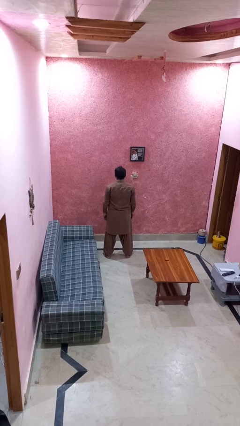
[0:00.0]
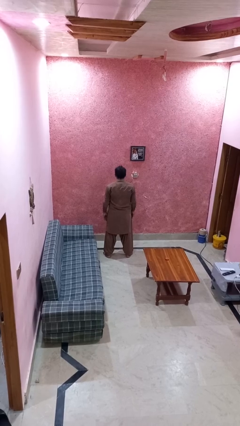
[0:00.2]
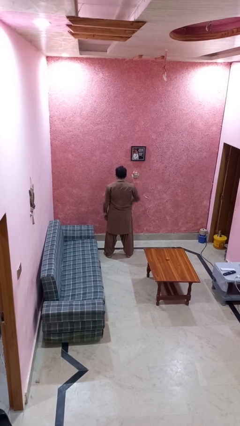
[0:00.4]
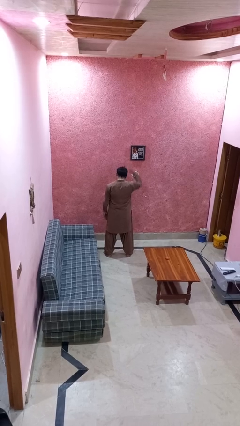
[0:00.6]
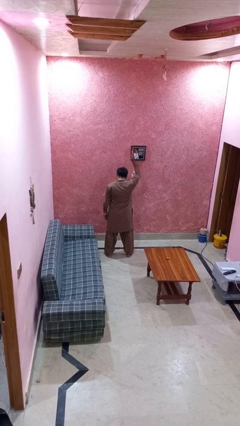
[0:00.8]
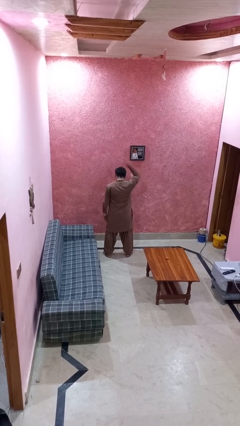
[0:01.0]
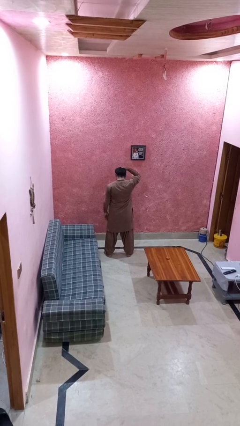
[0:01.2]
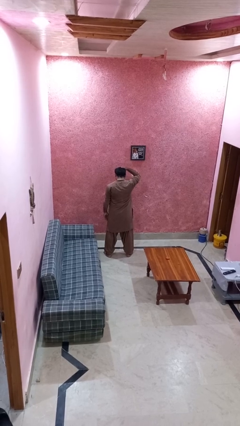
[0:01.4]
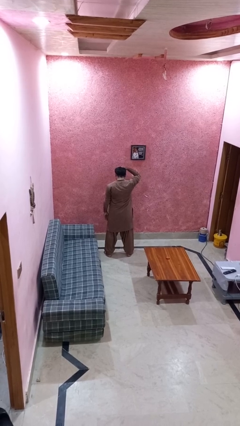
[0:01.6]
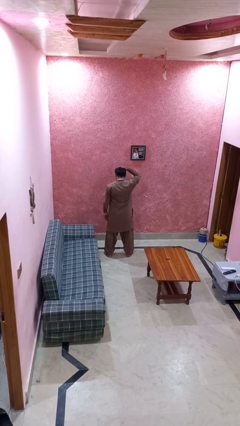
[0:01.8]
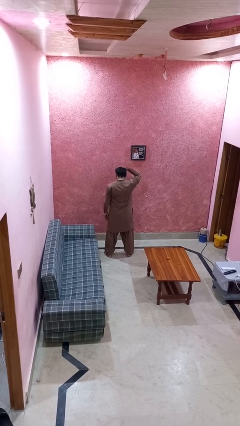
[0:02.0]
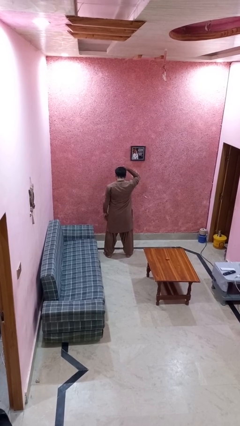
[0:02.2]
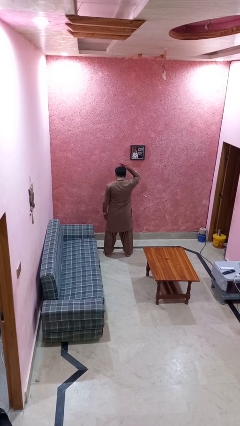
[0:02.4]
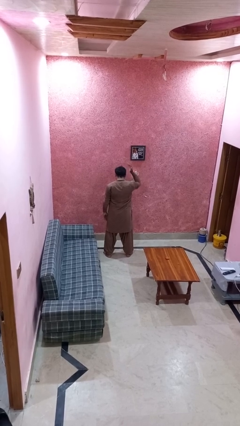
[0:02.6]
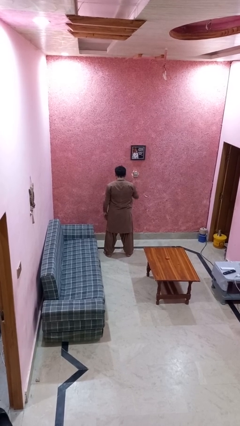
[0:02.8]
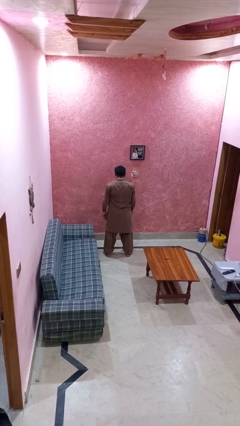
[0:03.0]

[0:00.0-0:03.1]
person pats head

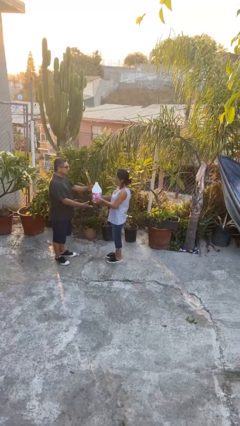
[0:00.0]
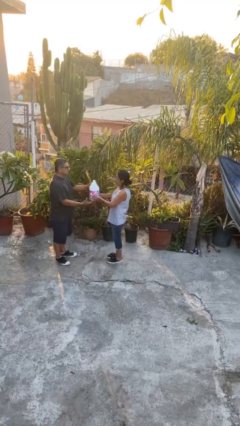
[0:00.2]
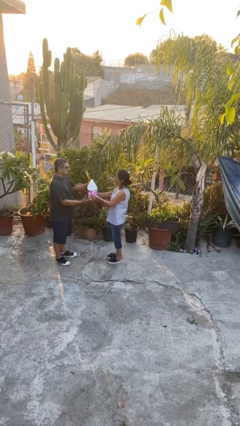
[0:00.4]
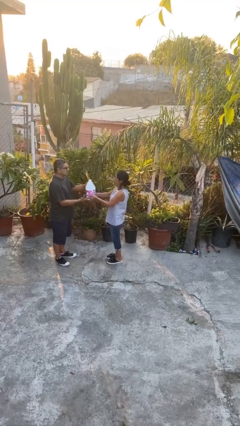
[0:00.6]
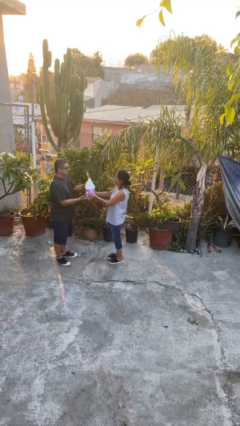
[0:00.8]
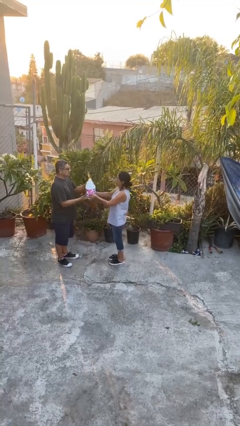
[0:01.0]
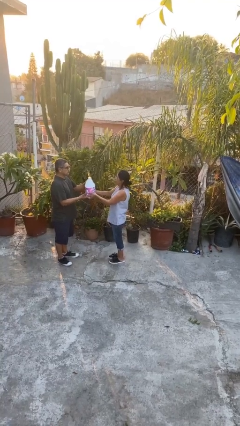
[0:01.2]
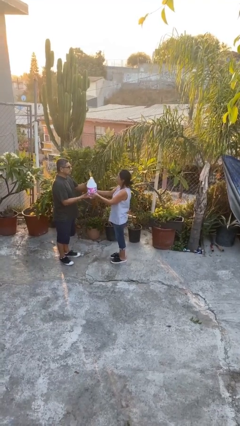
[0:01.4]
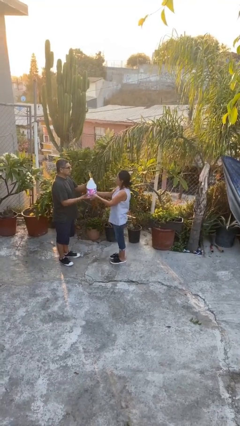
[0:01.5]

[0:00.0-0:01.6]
person transfers object to person

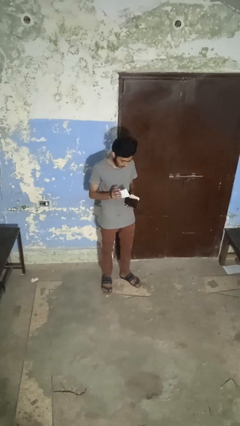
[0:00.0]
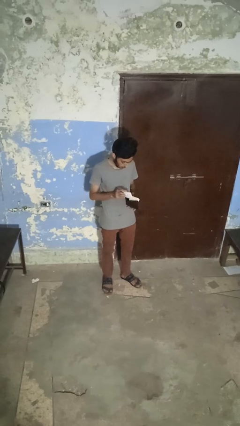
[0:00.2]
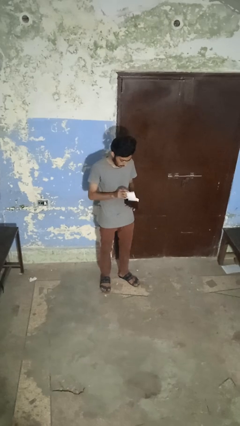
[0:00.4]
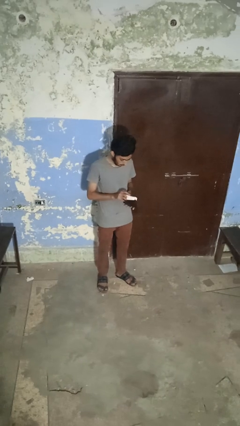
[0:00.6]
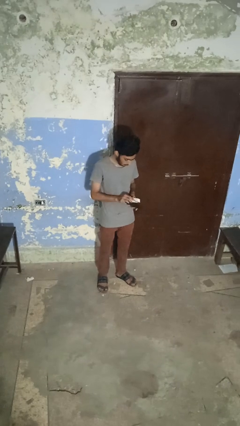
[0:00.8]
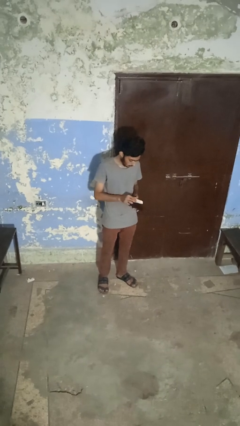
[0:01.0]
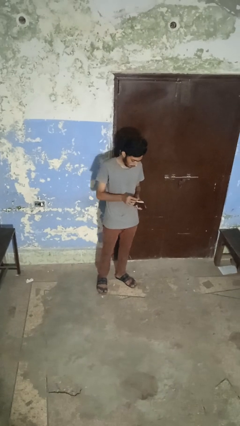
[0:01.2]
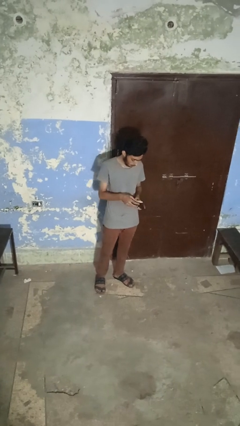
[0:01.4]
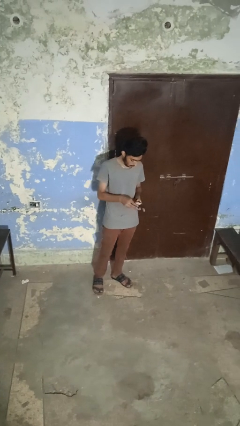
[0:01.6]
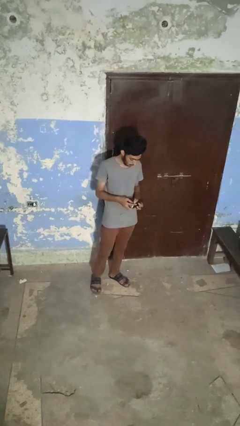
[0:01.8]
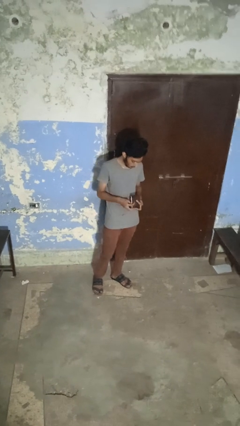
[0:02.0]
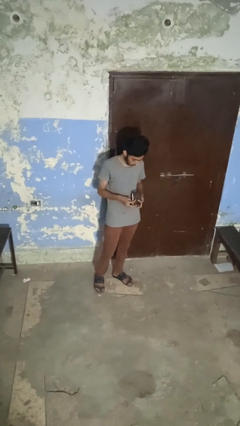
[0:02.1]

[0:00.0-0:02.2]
person puts object into purse

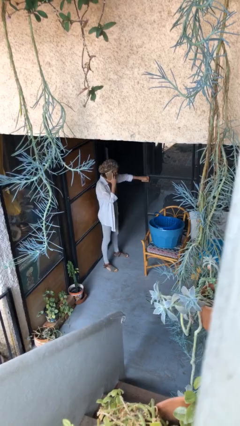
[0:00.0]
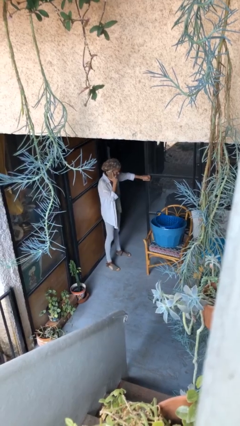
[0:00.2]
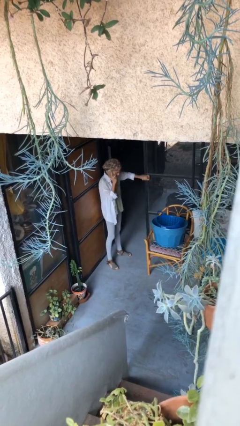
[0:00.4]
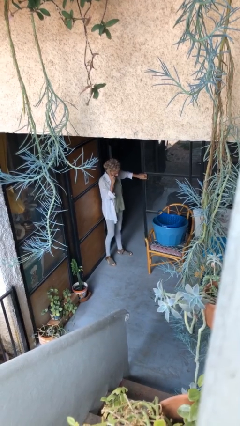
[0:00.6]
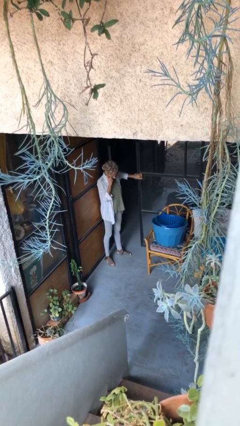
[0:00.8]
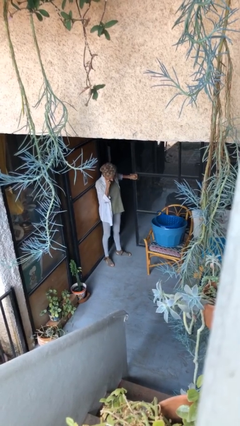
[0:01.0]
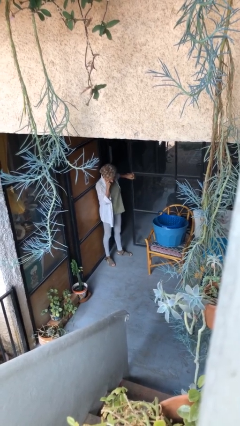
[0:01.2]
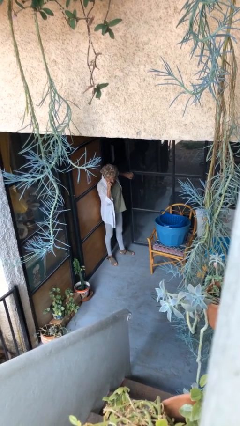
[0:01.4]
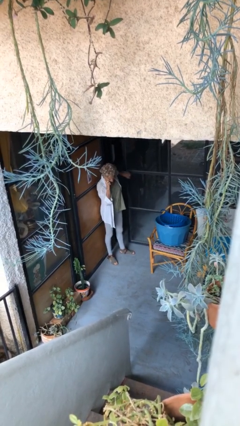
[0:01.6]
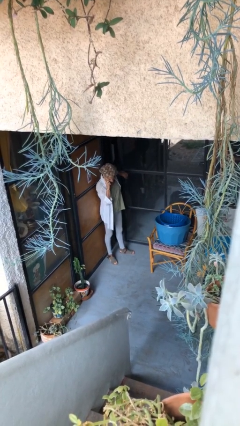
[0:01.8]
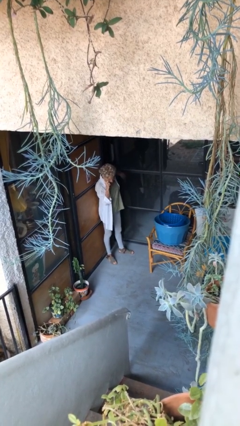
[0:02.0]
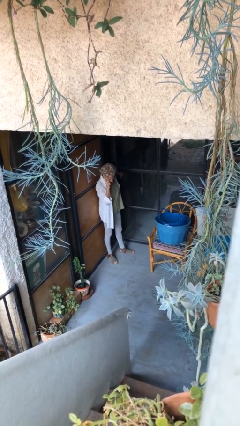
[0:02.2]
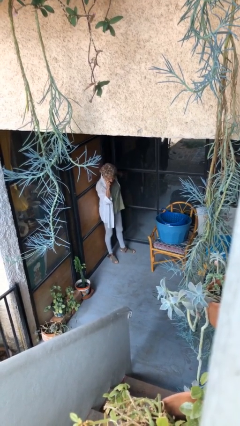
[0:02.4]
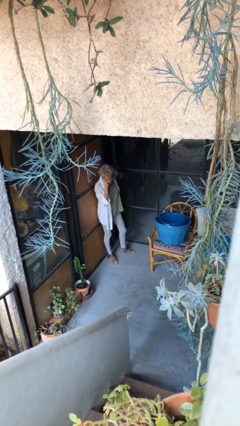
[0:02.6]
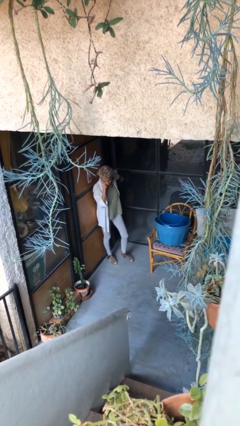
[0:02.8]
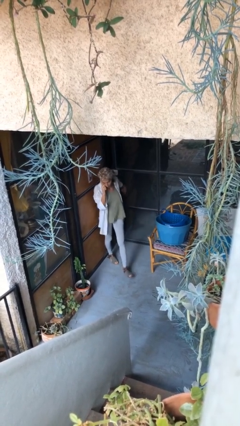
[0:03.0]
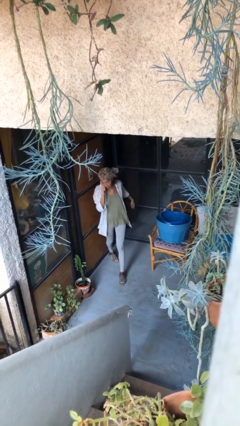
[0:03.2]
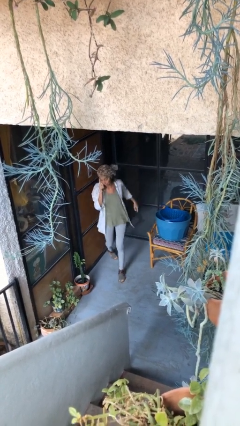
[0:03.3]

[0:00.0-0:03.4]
person closes facility door

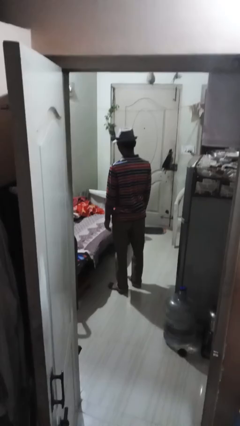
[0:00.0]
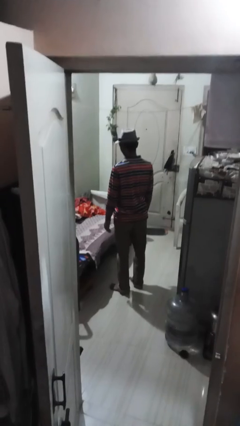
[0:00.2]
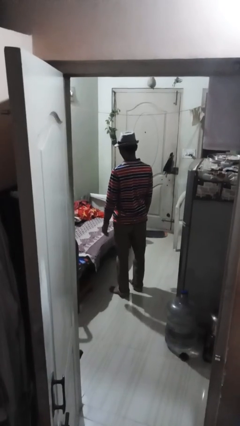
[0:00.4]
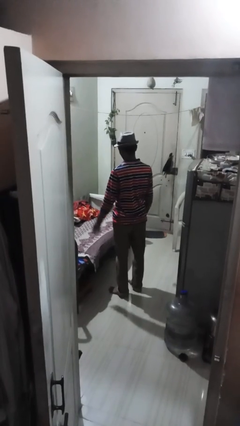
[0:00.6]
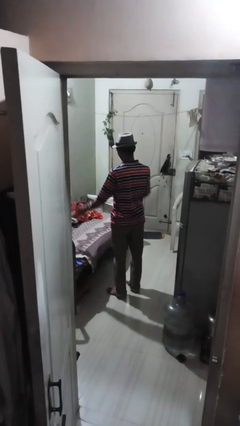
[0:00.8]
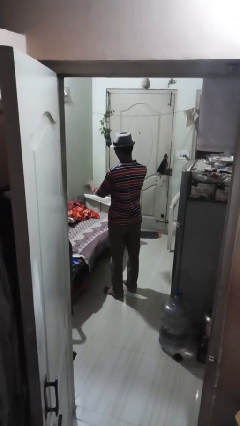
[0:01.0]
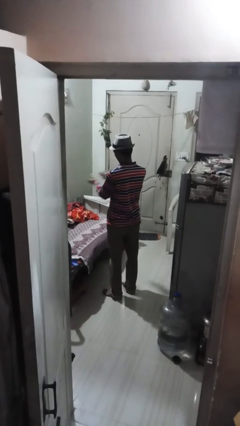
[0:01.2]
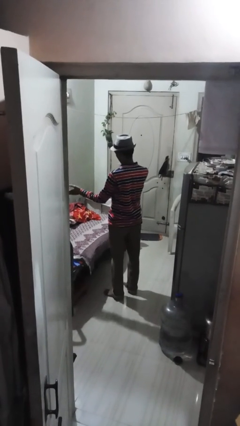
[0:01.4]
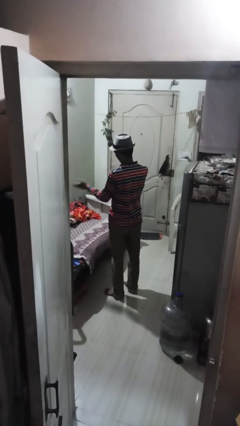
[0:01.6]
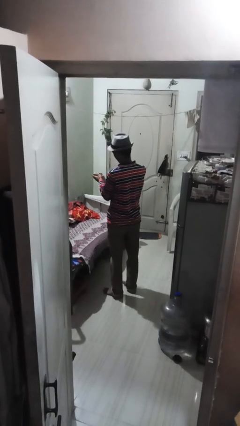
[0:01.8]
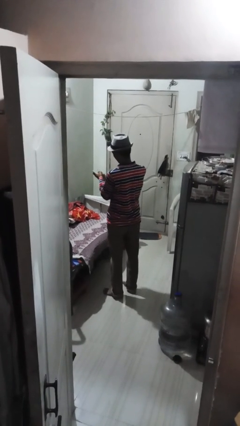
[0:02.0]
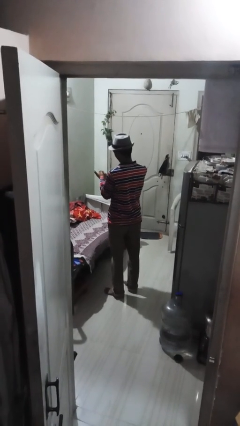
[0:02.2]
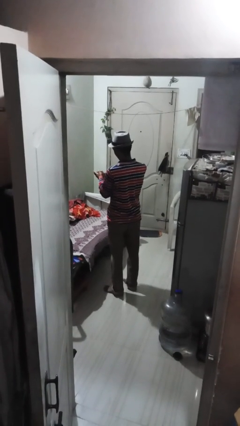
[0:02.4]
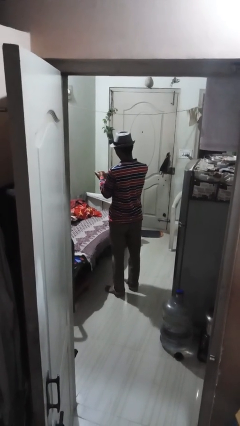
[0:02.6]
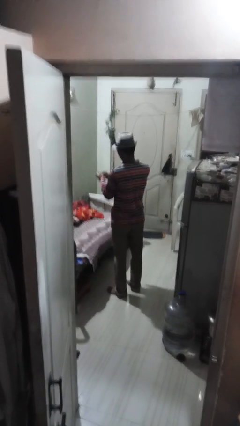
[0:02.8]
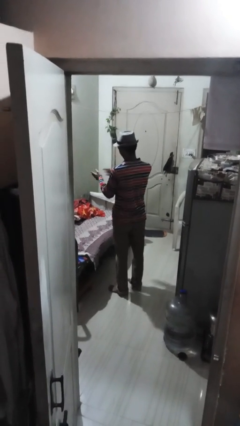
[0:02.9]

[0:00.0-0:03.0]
person claps hands

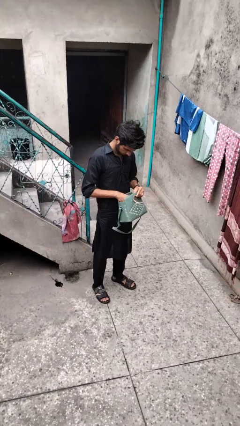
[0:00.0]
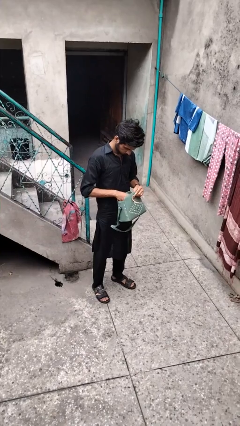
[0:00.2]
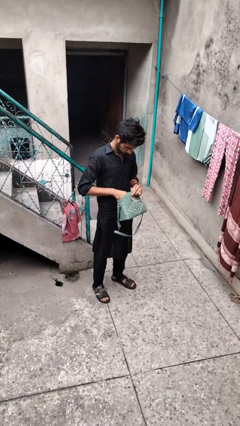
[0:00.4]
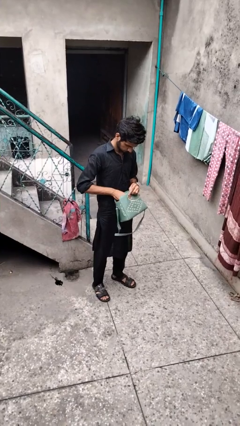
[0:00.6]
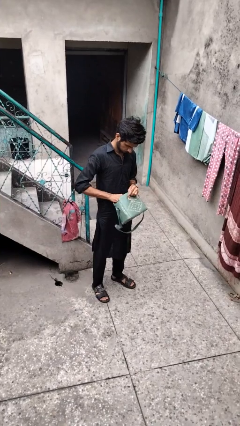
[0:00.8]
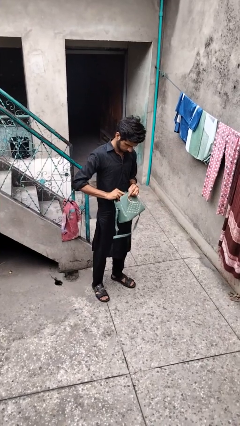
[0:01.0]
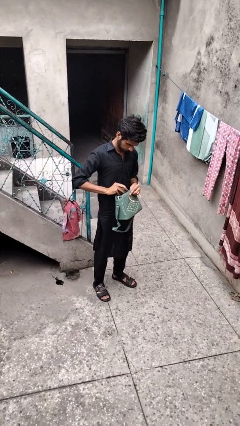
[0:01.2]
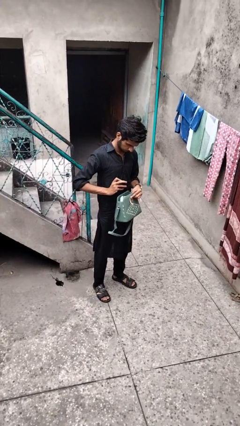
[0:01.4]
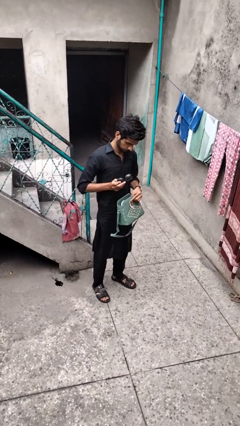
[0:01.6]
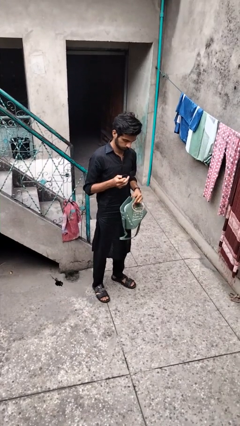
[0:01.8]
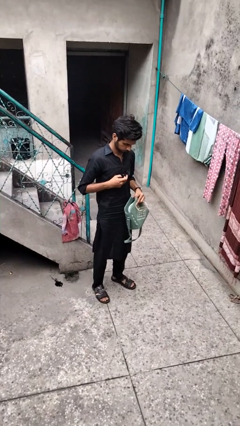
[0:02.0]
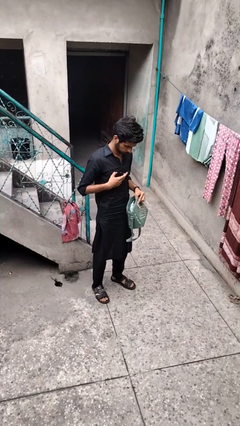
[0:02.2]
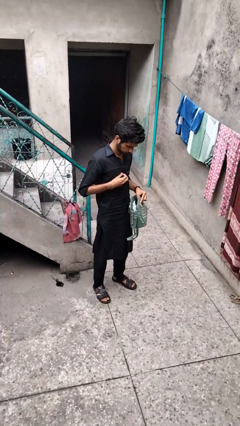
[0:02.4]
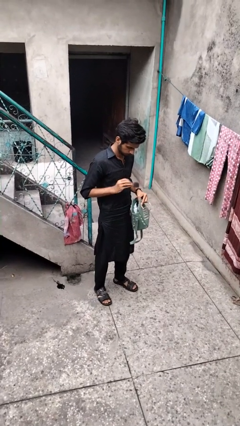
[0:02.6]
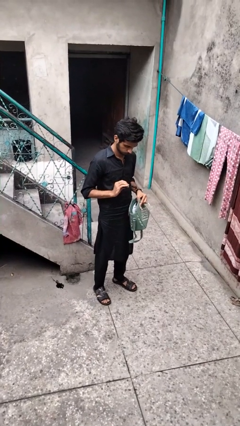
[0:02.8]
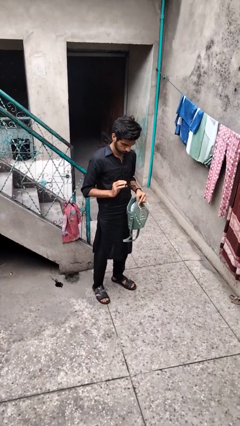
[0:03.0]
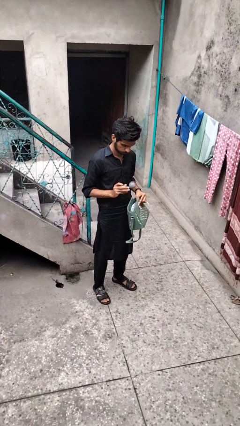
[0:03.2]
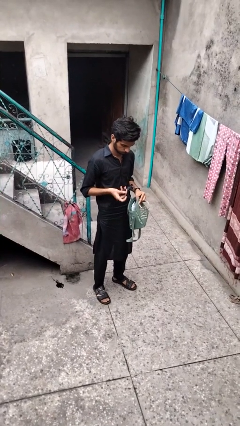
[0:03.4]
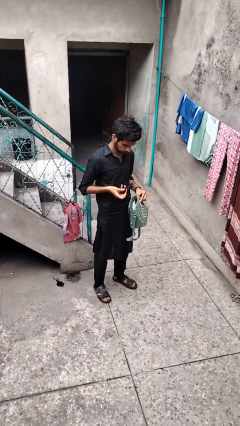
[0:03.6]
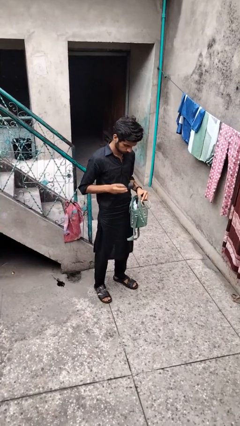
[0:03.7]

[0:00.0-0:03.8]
person takes object from purse
